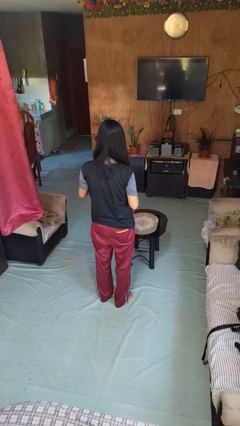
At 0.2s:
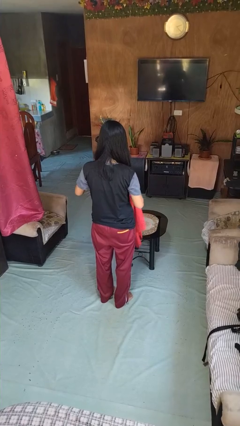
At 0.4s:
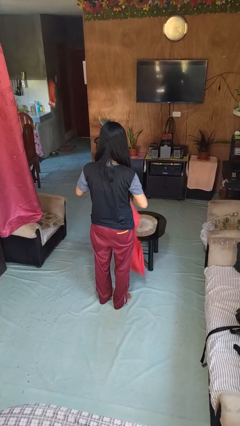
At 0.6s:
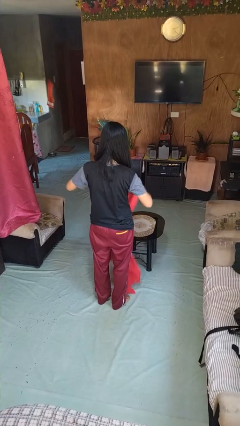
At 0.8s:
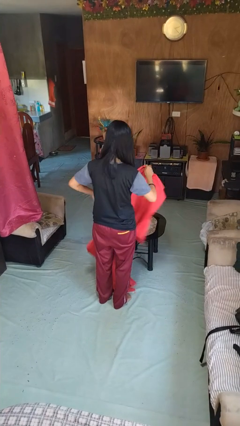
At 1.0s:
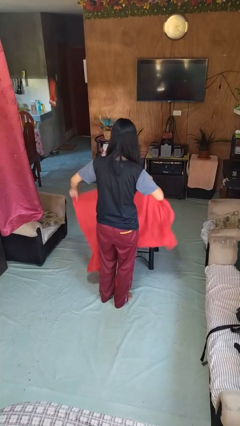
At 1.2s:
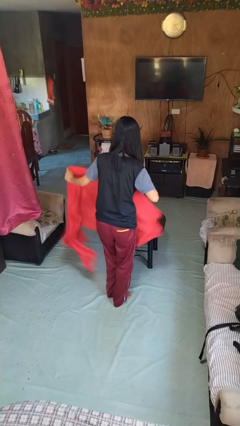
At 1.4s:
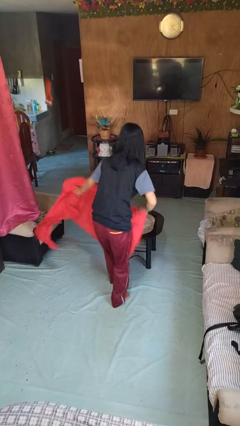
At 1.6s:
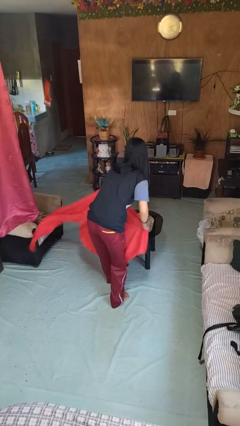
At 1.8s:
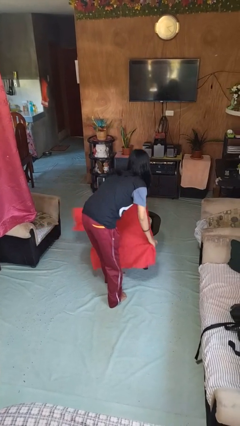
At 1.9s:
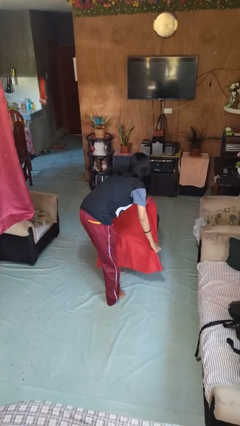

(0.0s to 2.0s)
person spreads tablecloth

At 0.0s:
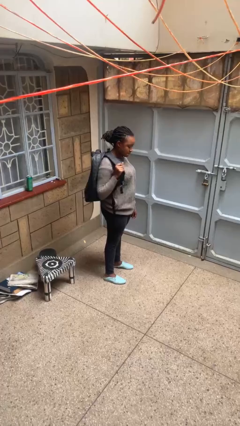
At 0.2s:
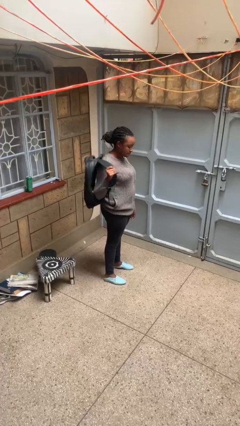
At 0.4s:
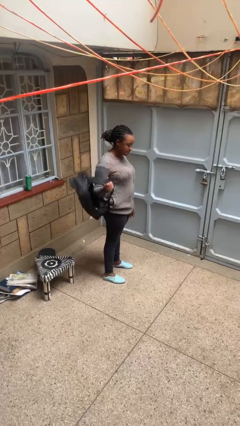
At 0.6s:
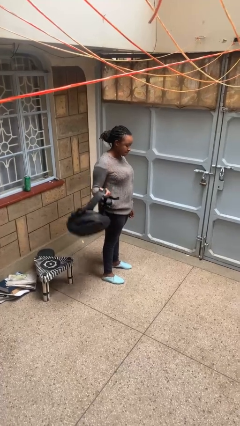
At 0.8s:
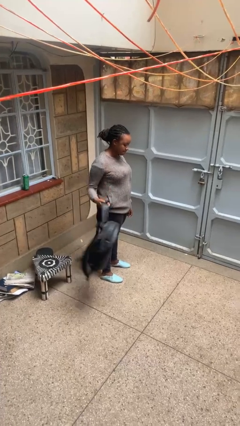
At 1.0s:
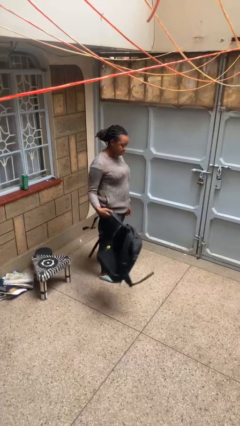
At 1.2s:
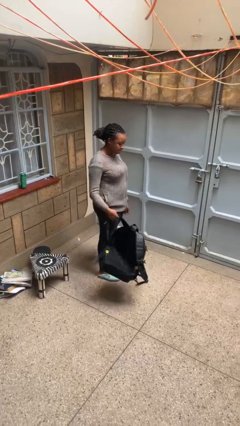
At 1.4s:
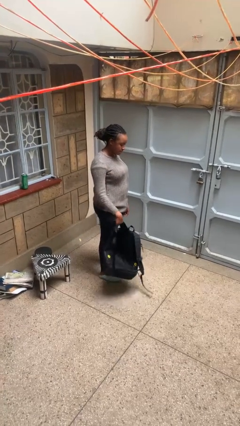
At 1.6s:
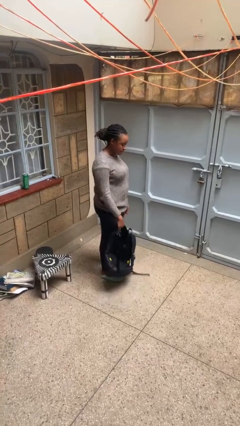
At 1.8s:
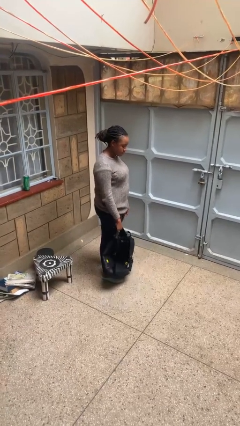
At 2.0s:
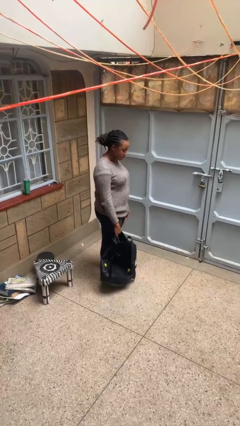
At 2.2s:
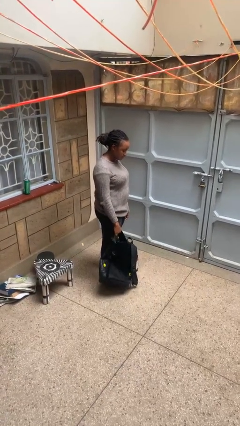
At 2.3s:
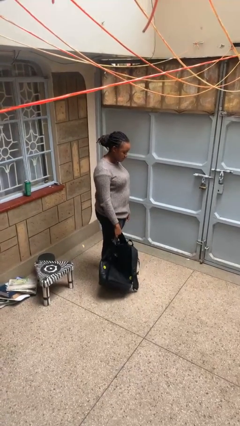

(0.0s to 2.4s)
person takes off backpack

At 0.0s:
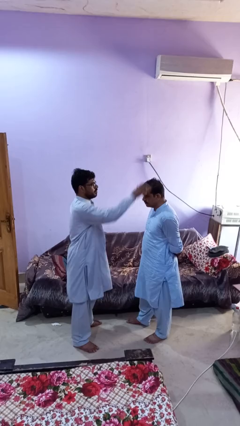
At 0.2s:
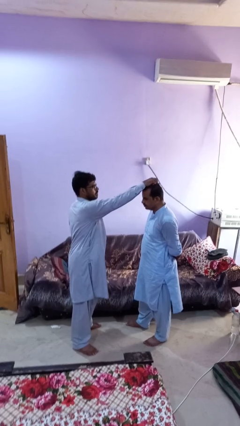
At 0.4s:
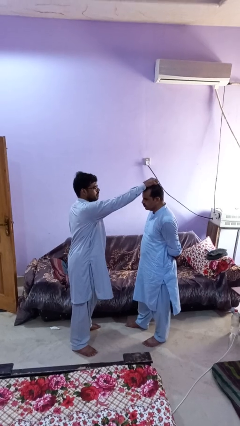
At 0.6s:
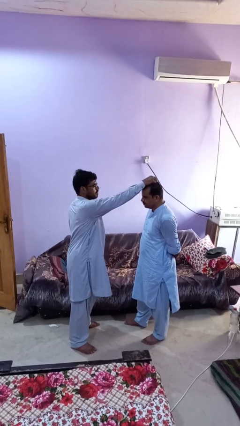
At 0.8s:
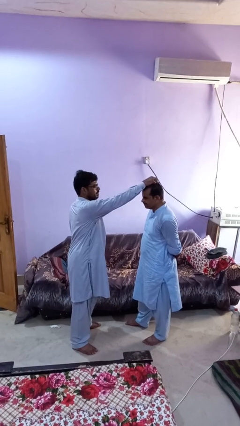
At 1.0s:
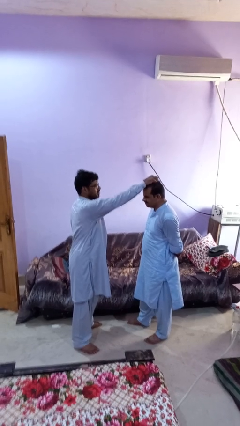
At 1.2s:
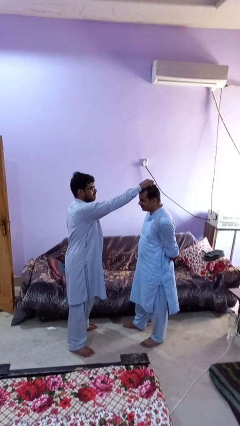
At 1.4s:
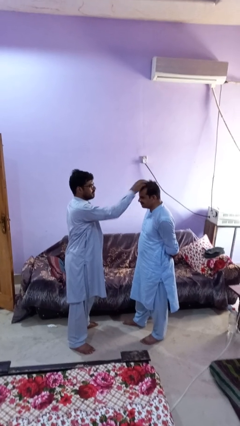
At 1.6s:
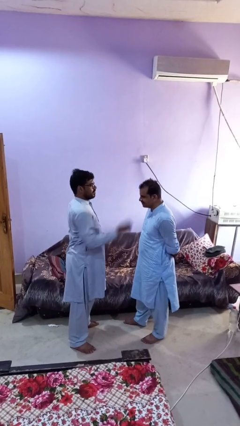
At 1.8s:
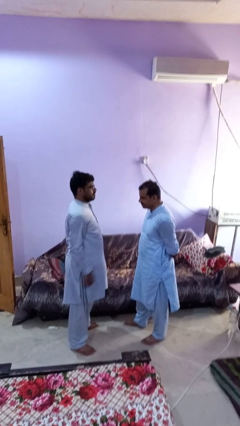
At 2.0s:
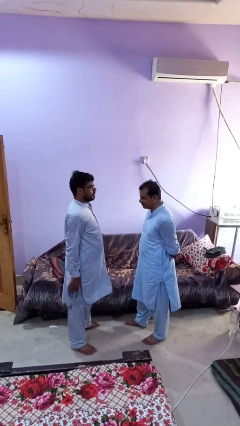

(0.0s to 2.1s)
person grabs person by hair

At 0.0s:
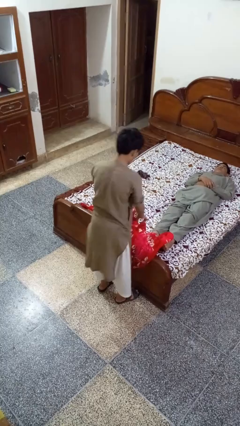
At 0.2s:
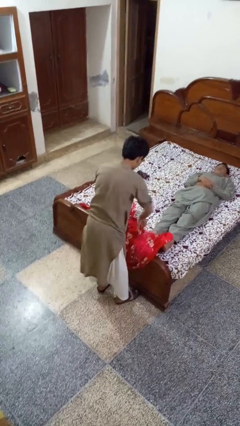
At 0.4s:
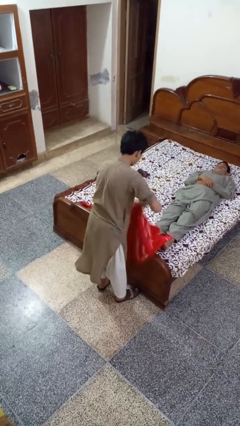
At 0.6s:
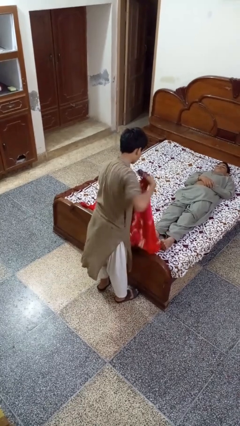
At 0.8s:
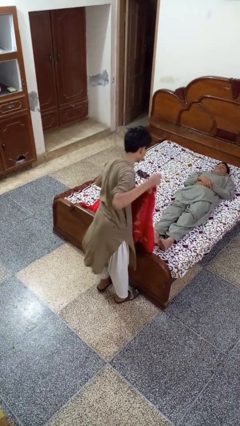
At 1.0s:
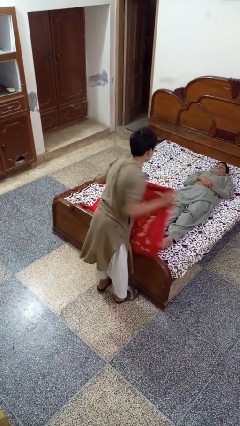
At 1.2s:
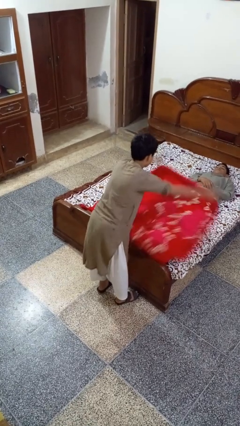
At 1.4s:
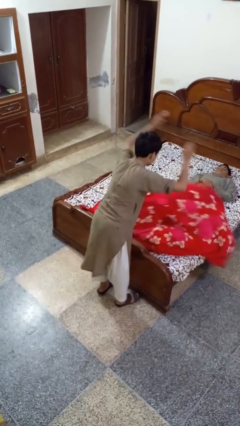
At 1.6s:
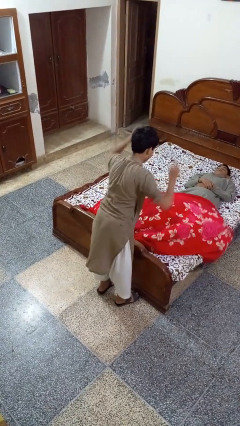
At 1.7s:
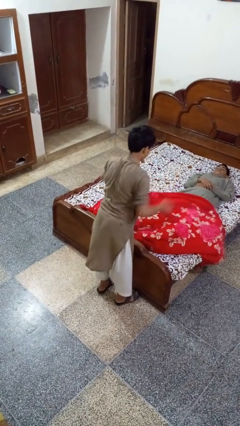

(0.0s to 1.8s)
person covers friend with blanket

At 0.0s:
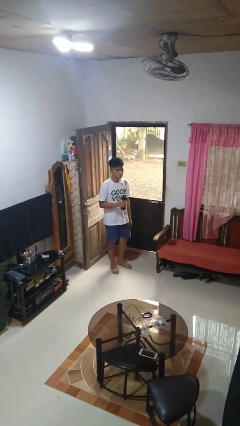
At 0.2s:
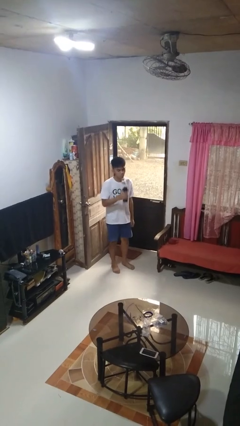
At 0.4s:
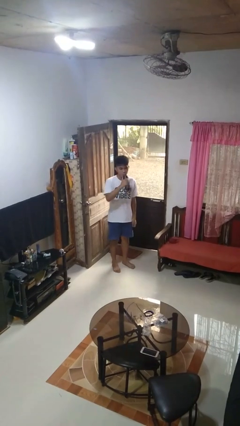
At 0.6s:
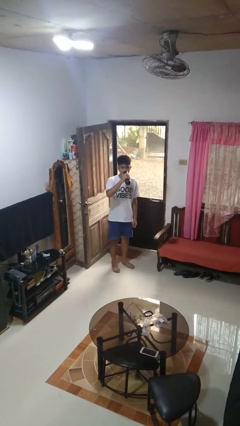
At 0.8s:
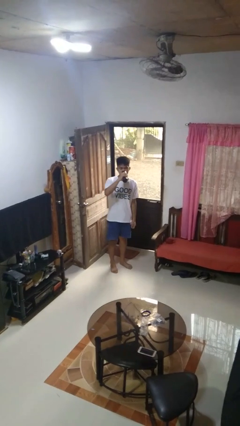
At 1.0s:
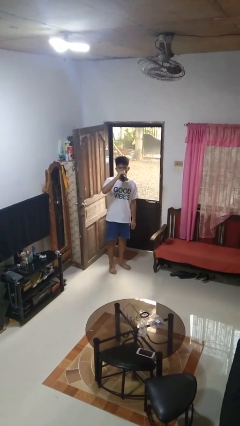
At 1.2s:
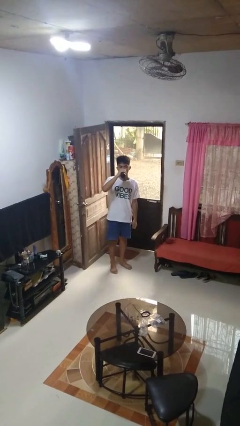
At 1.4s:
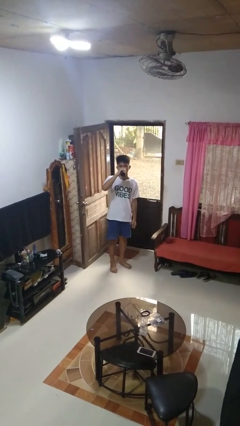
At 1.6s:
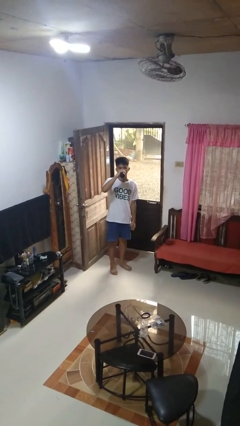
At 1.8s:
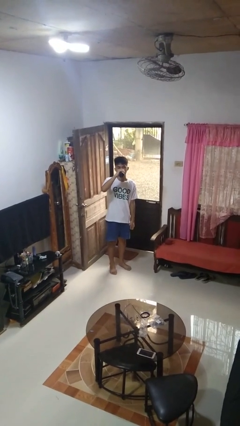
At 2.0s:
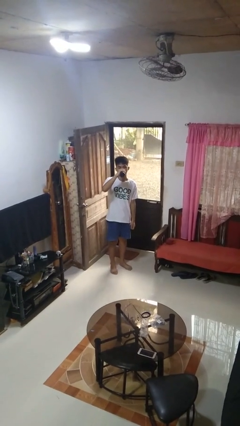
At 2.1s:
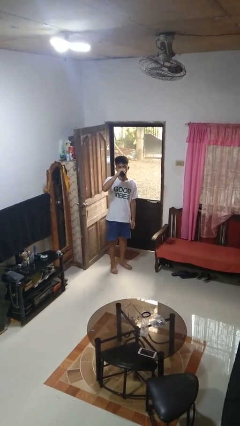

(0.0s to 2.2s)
person drinks from bottle

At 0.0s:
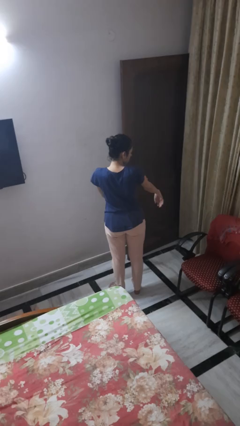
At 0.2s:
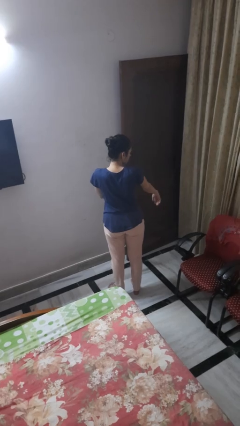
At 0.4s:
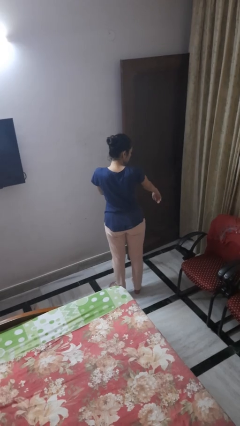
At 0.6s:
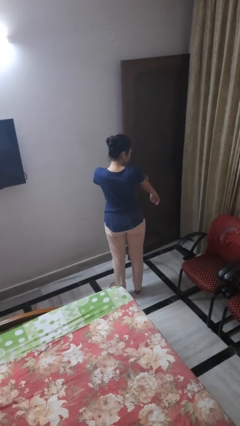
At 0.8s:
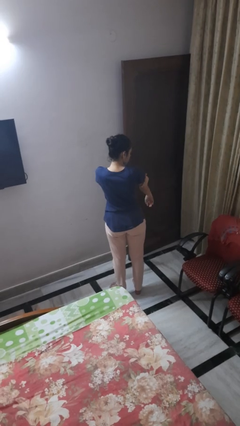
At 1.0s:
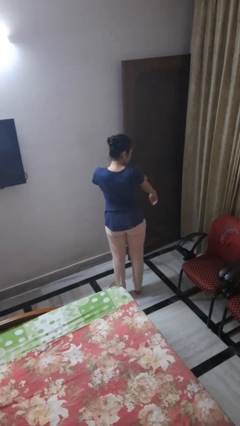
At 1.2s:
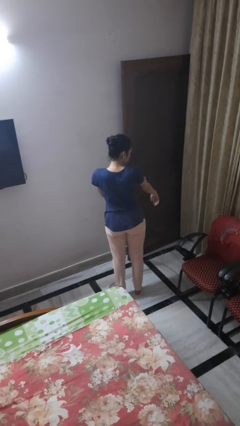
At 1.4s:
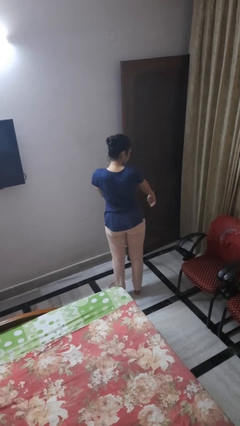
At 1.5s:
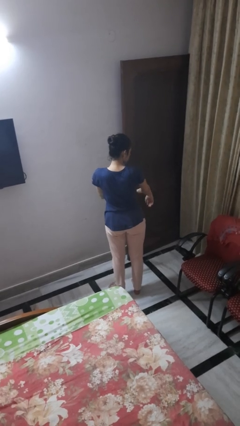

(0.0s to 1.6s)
person swats bug

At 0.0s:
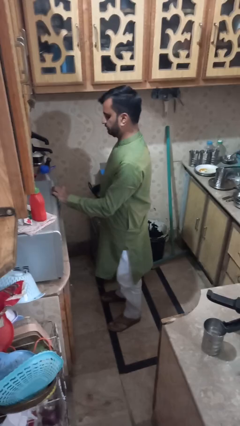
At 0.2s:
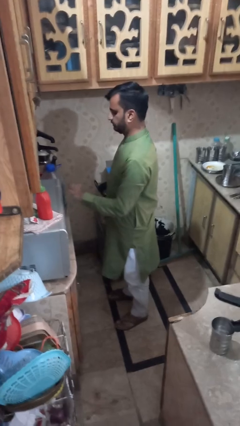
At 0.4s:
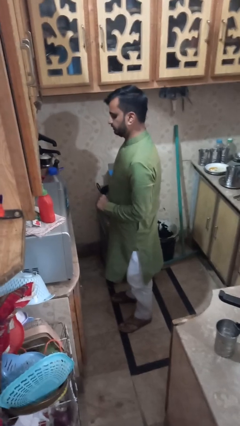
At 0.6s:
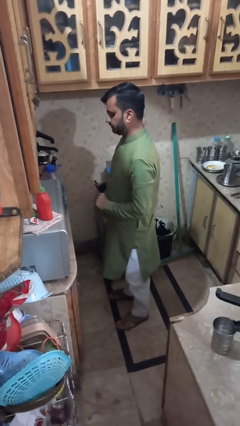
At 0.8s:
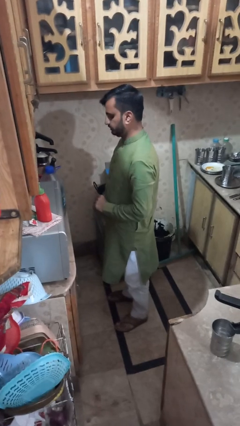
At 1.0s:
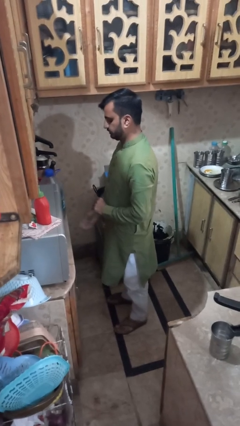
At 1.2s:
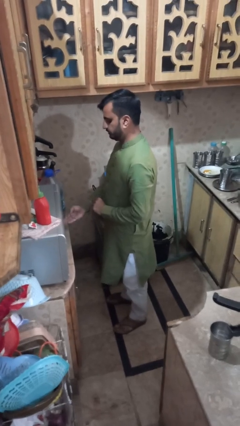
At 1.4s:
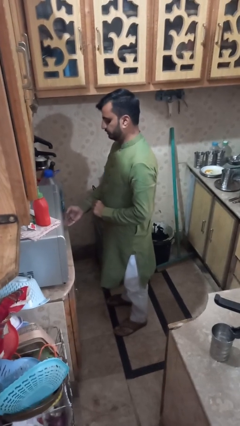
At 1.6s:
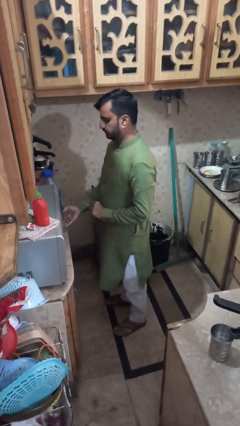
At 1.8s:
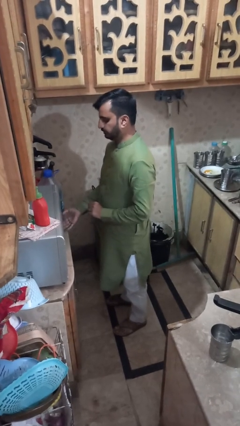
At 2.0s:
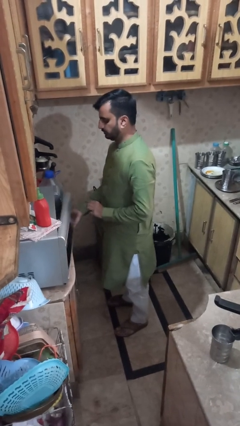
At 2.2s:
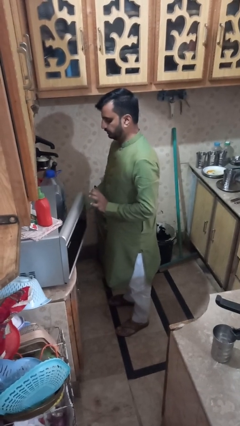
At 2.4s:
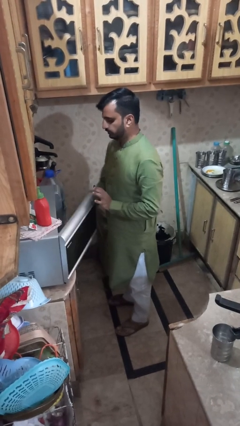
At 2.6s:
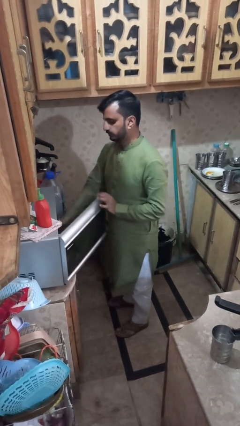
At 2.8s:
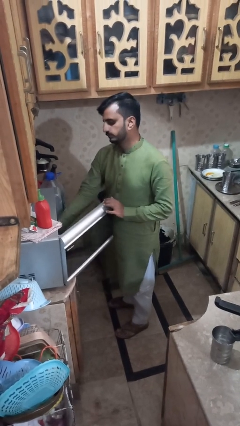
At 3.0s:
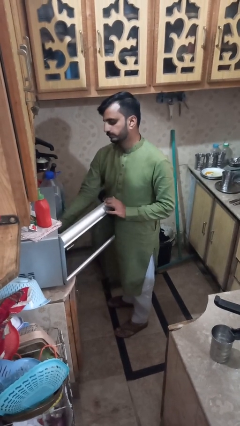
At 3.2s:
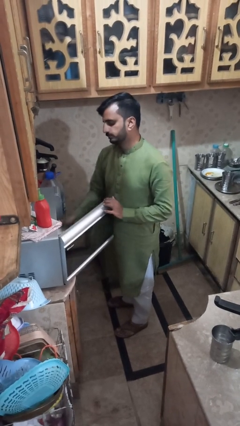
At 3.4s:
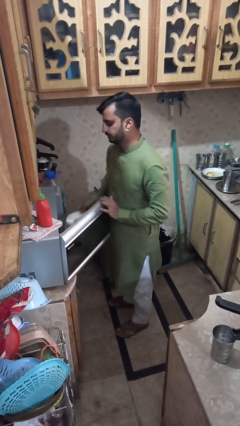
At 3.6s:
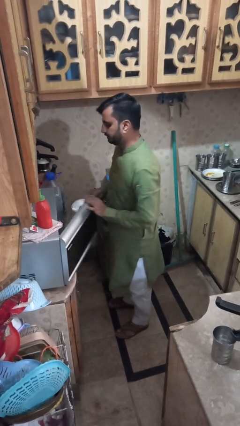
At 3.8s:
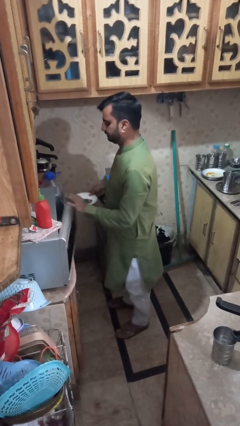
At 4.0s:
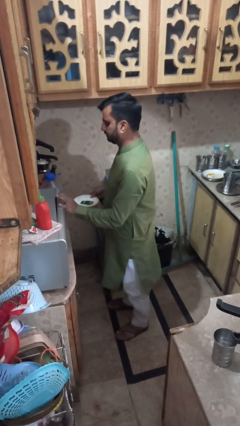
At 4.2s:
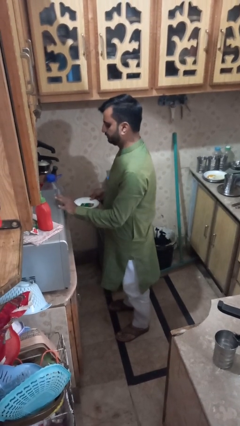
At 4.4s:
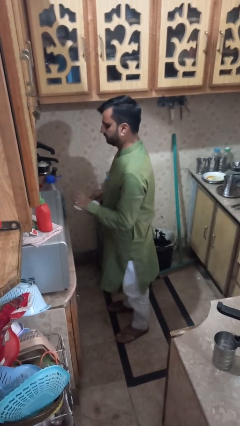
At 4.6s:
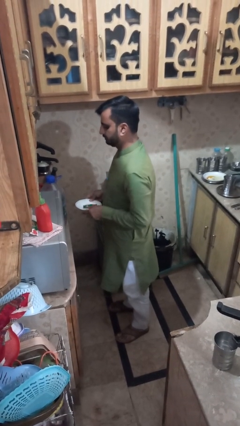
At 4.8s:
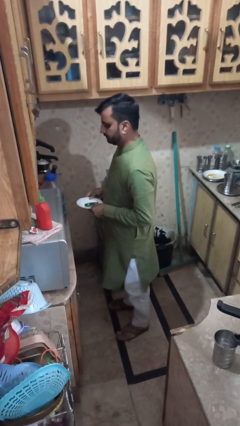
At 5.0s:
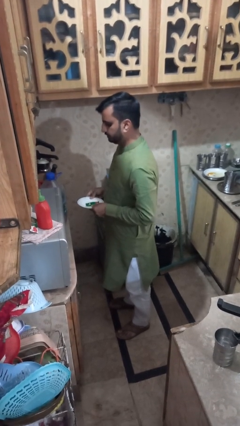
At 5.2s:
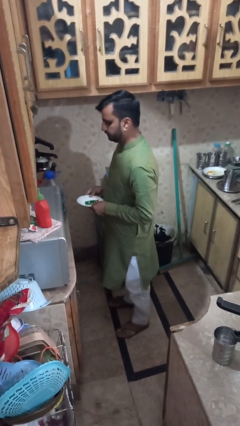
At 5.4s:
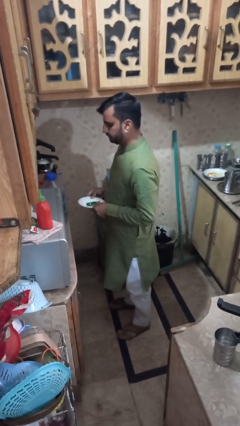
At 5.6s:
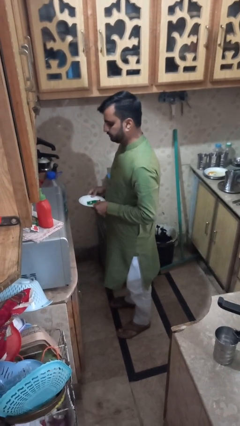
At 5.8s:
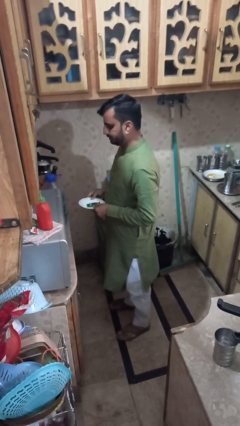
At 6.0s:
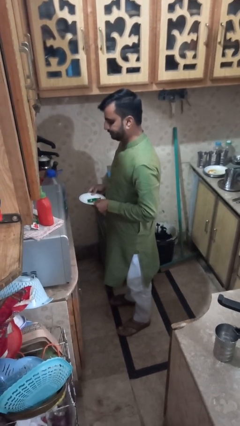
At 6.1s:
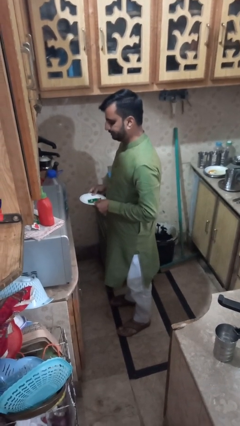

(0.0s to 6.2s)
person takes object from microwave
